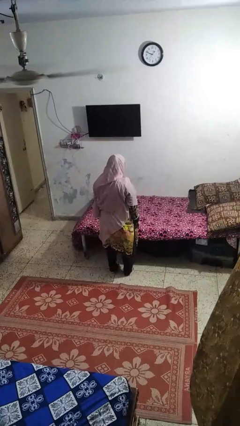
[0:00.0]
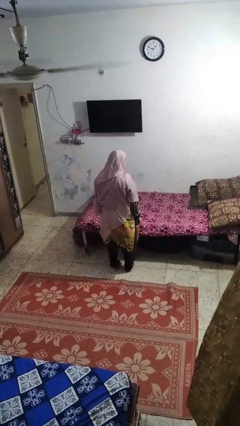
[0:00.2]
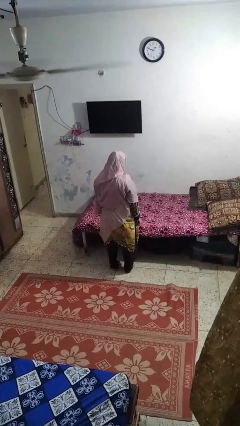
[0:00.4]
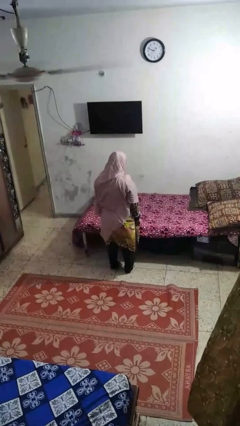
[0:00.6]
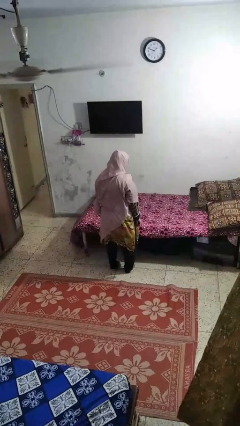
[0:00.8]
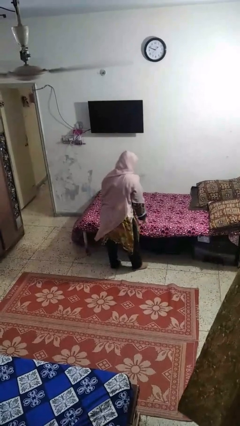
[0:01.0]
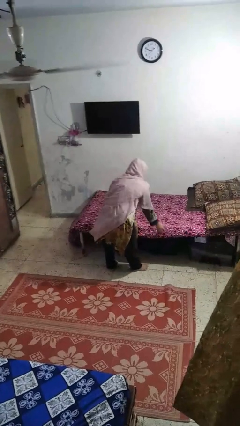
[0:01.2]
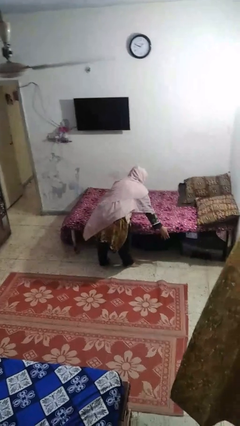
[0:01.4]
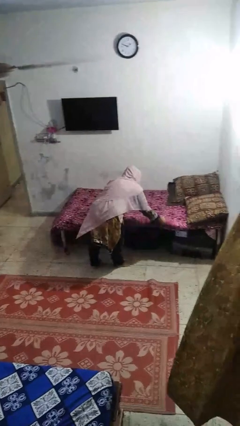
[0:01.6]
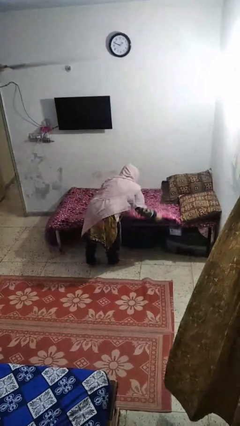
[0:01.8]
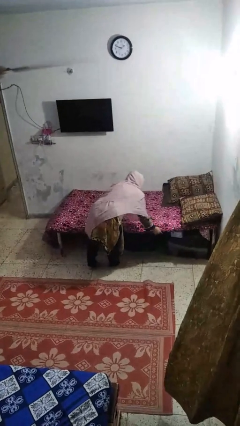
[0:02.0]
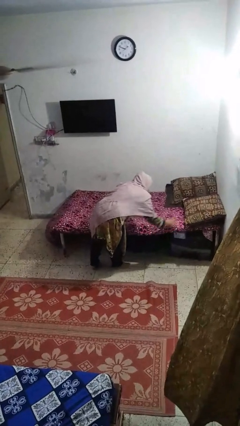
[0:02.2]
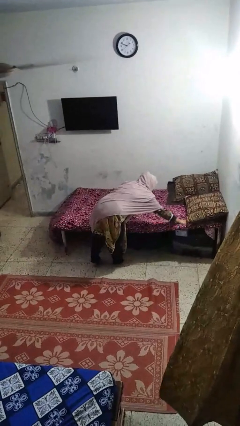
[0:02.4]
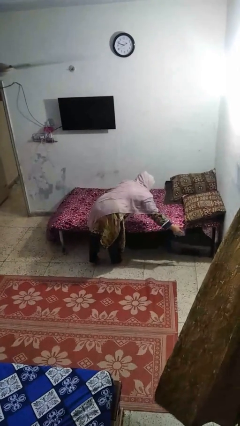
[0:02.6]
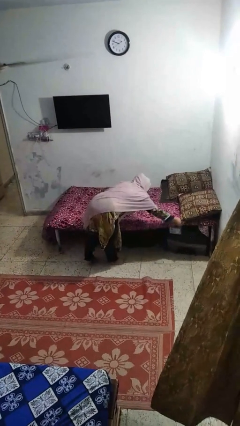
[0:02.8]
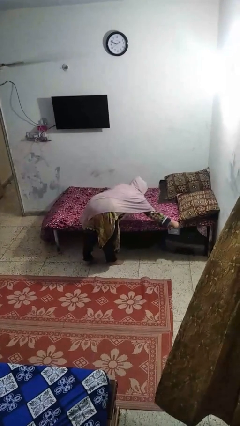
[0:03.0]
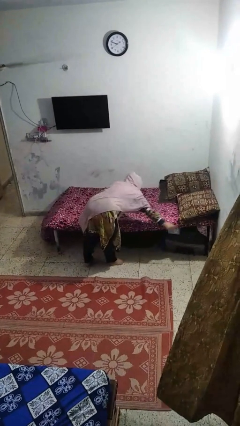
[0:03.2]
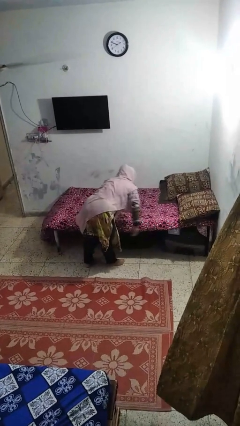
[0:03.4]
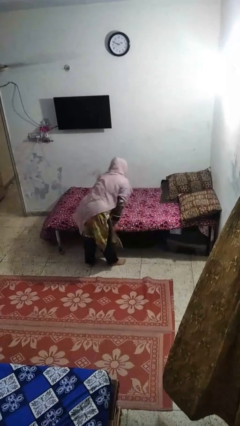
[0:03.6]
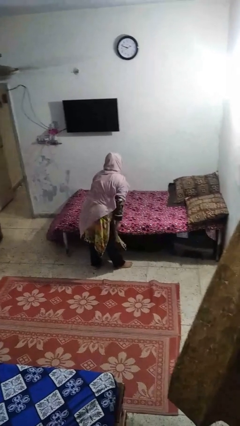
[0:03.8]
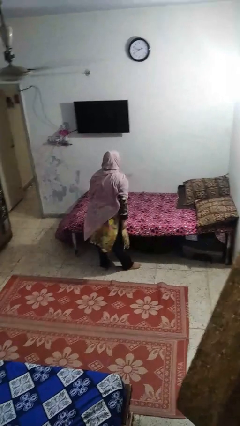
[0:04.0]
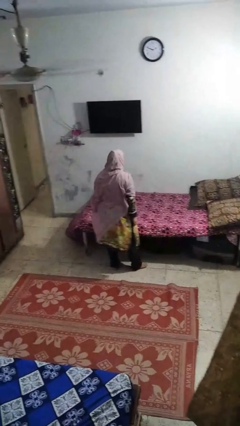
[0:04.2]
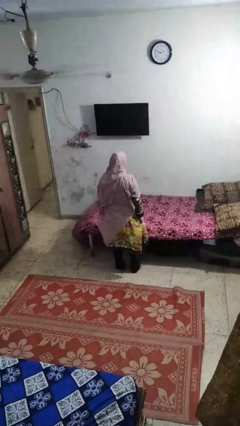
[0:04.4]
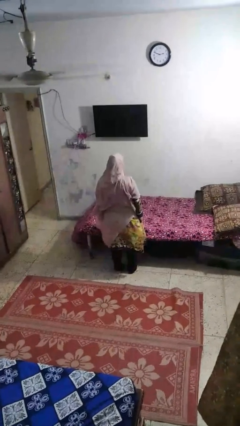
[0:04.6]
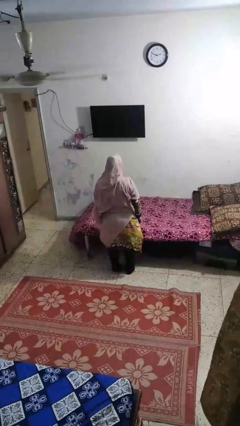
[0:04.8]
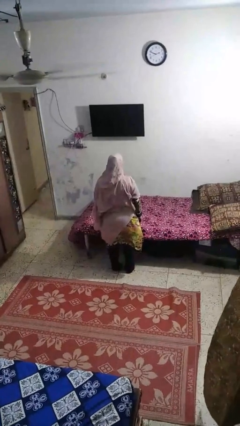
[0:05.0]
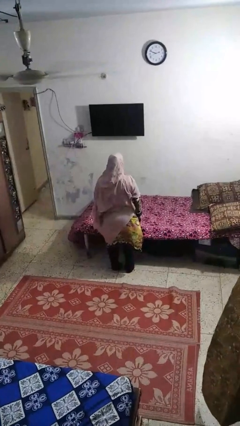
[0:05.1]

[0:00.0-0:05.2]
person makes bed

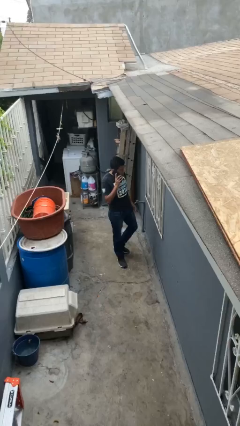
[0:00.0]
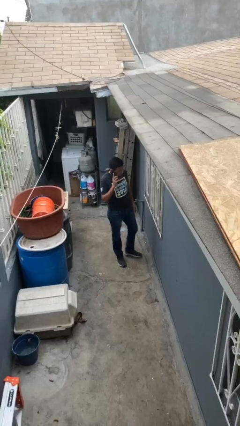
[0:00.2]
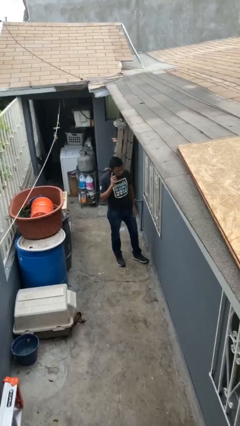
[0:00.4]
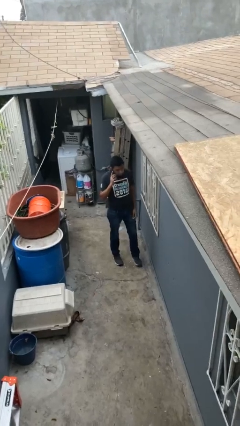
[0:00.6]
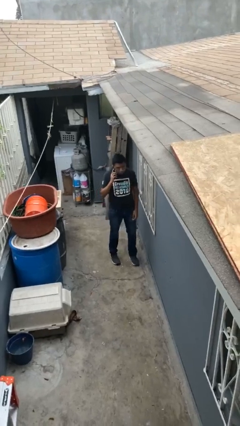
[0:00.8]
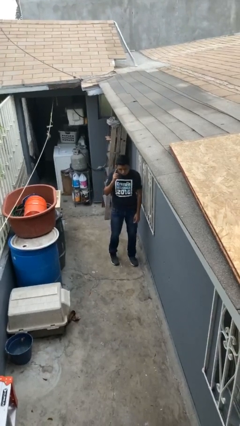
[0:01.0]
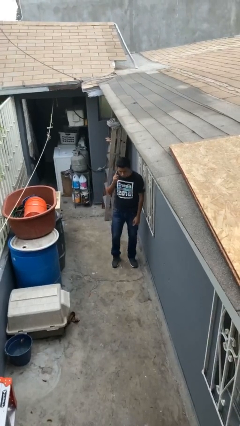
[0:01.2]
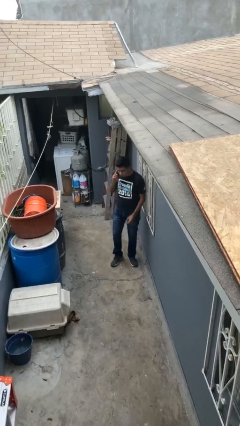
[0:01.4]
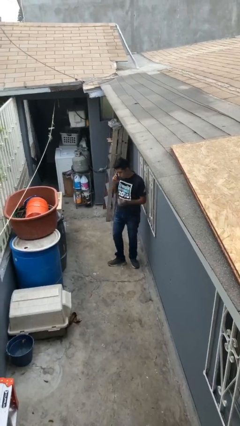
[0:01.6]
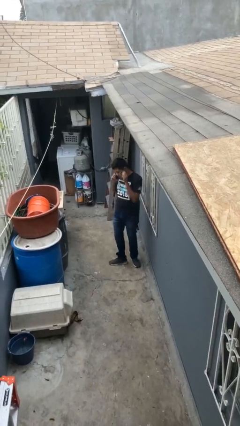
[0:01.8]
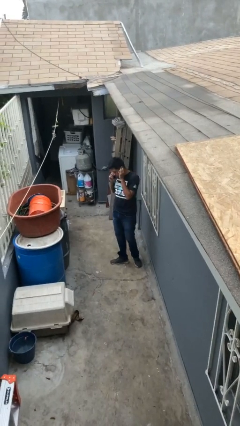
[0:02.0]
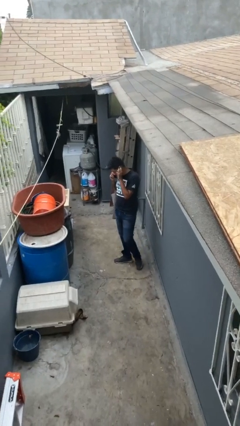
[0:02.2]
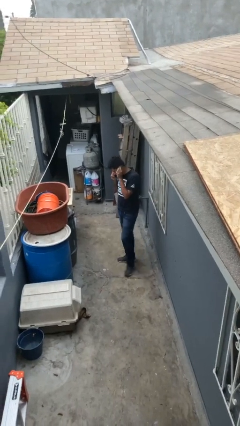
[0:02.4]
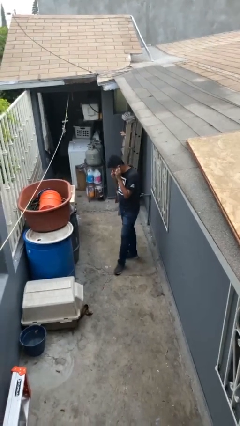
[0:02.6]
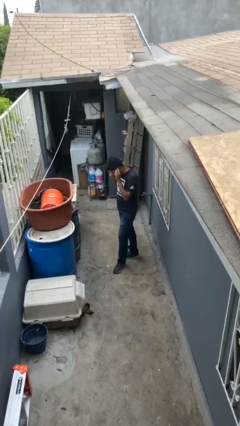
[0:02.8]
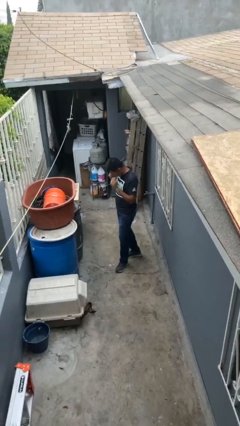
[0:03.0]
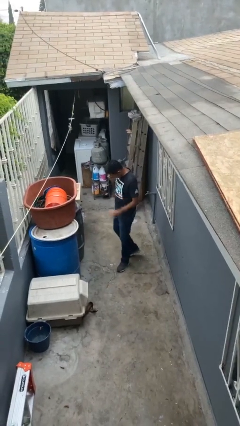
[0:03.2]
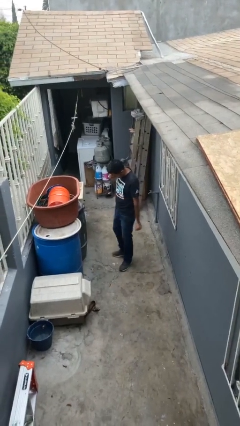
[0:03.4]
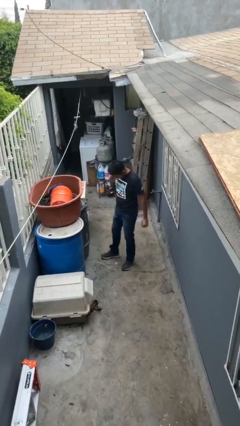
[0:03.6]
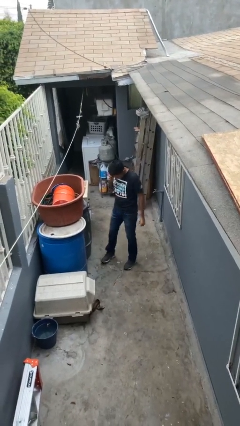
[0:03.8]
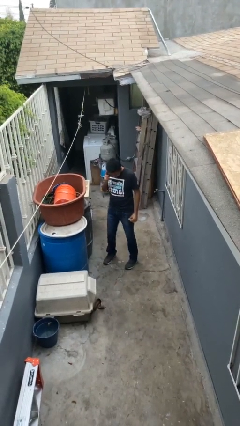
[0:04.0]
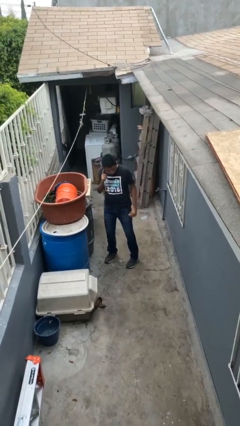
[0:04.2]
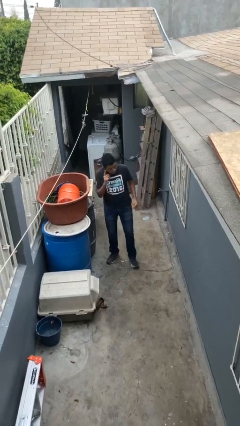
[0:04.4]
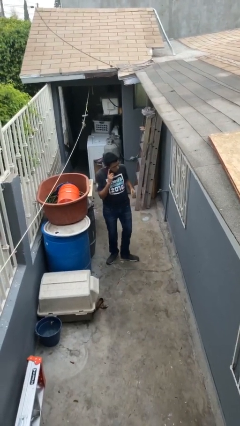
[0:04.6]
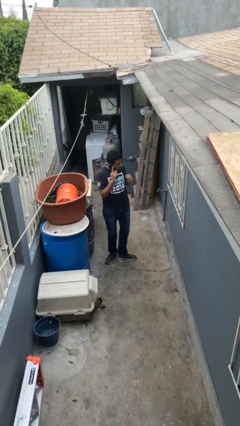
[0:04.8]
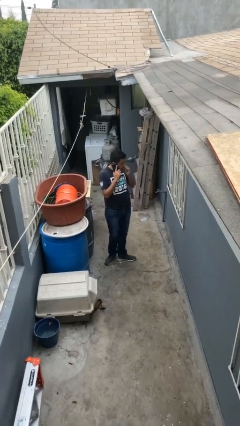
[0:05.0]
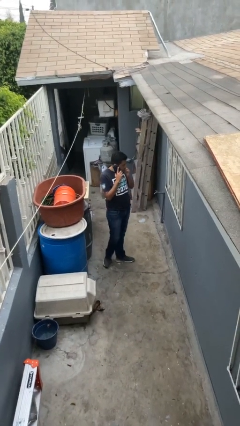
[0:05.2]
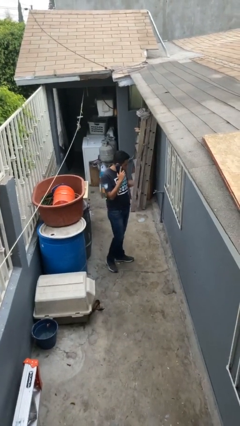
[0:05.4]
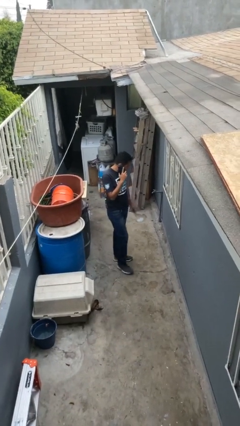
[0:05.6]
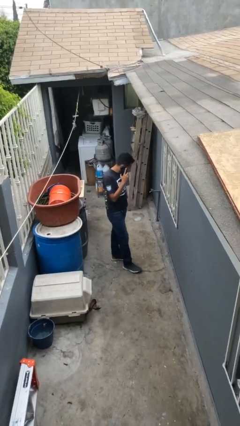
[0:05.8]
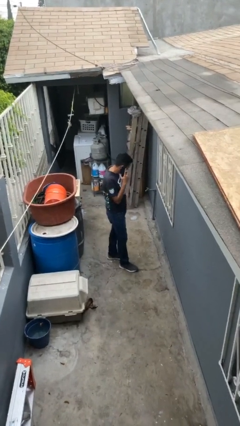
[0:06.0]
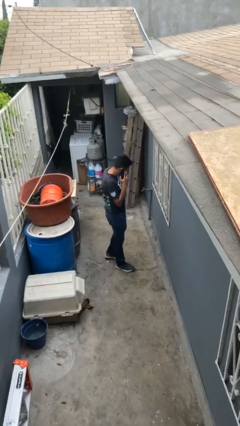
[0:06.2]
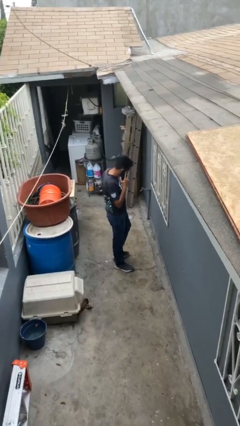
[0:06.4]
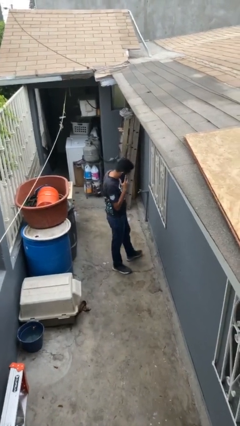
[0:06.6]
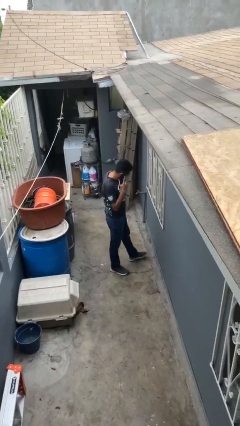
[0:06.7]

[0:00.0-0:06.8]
person talks on phone

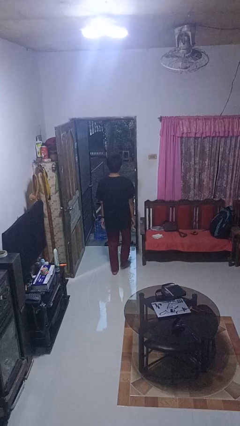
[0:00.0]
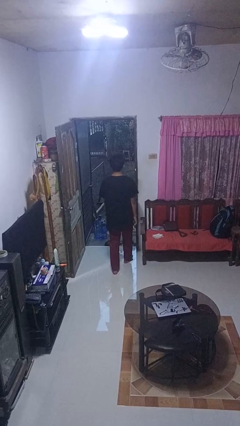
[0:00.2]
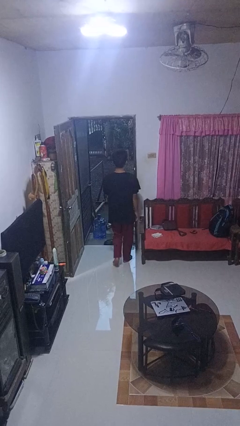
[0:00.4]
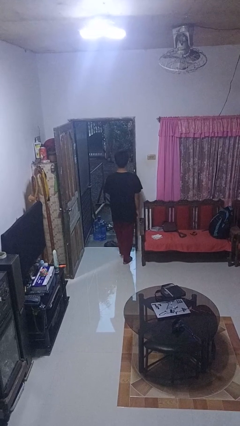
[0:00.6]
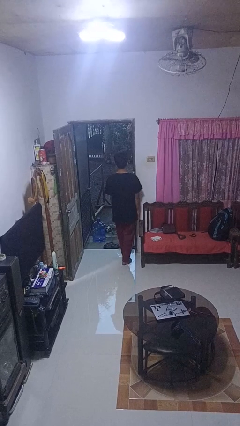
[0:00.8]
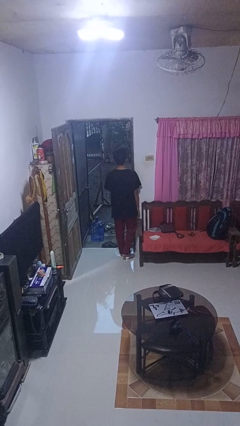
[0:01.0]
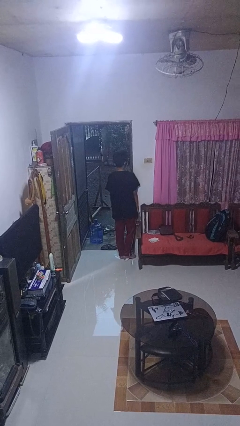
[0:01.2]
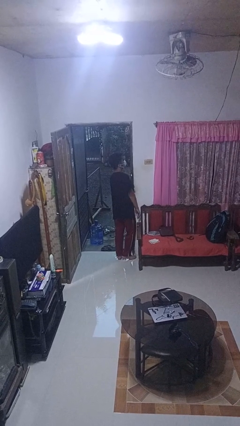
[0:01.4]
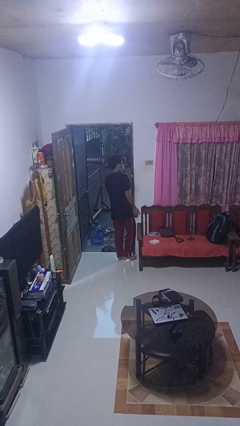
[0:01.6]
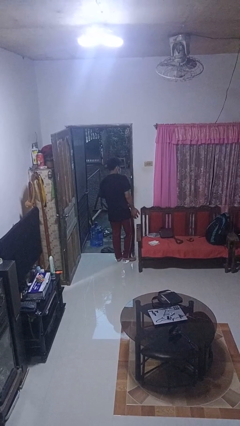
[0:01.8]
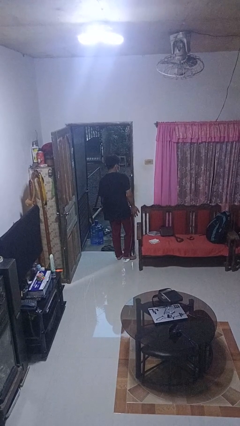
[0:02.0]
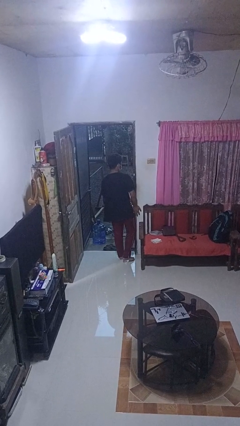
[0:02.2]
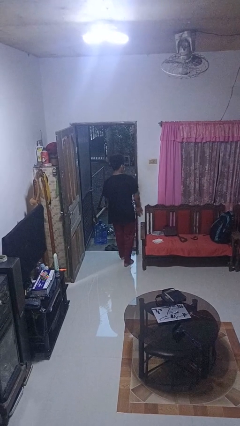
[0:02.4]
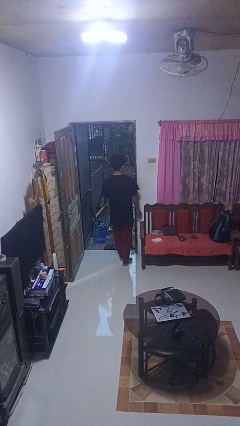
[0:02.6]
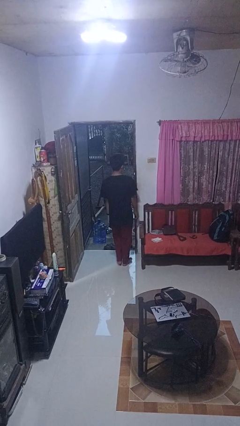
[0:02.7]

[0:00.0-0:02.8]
person bumps into wall

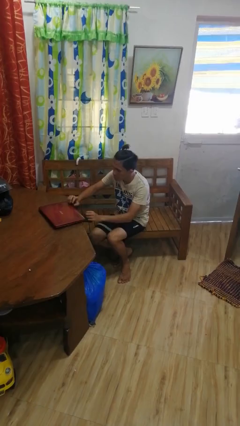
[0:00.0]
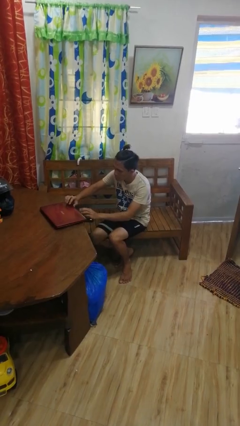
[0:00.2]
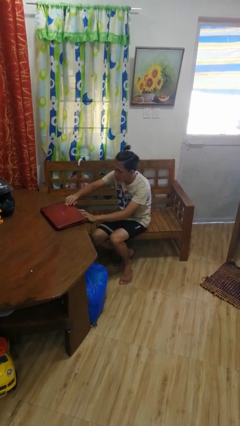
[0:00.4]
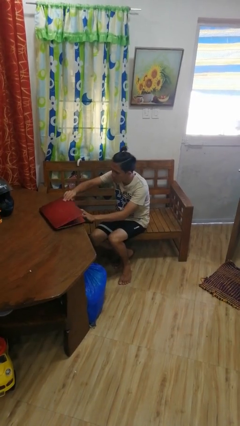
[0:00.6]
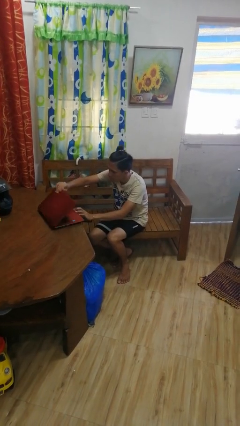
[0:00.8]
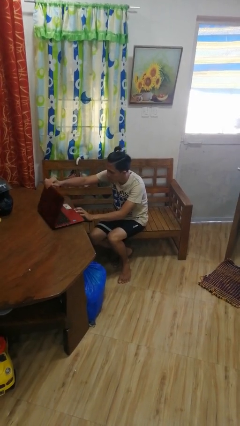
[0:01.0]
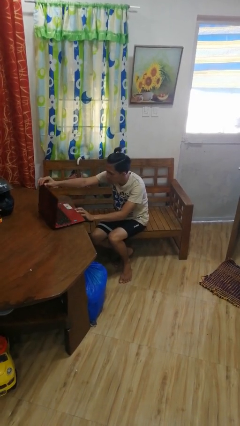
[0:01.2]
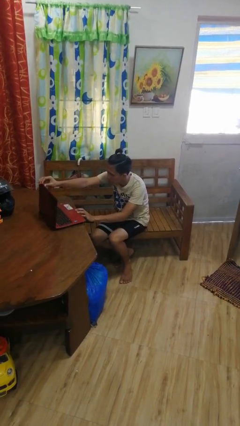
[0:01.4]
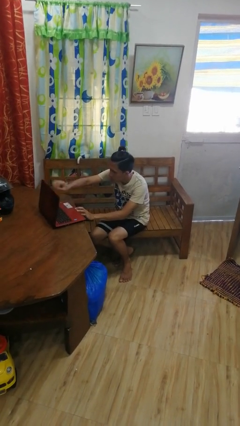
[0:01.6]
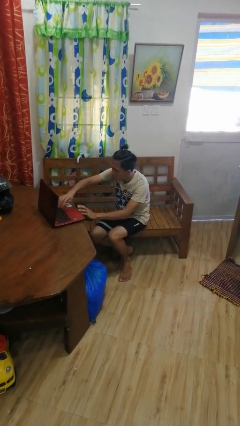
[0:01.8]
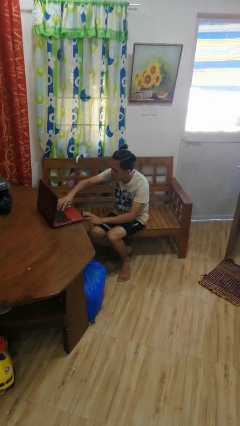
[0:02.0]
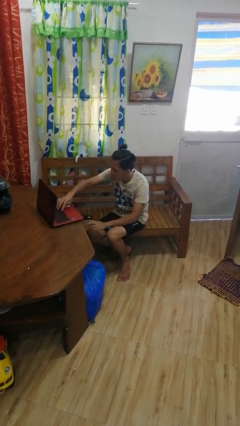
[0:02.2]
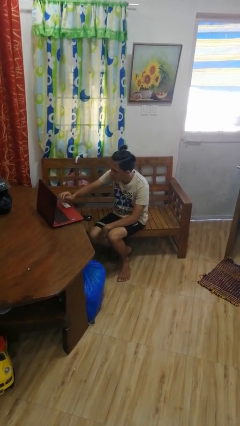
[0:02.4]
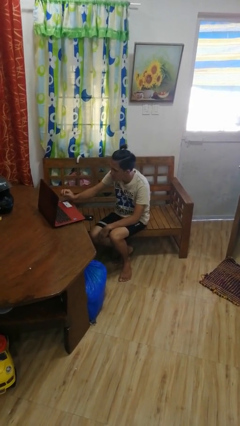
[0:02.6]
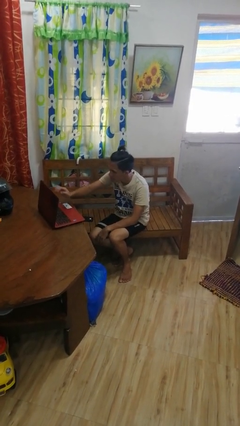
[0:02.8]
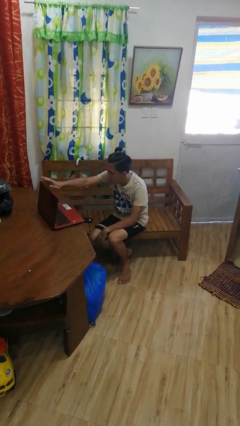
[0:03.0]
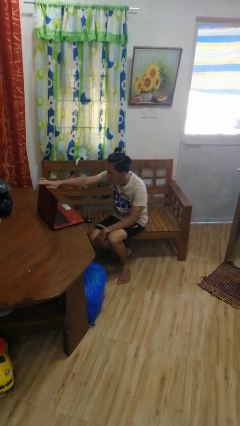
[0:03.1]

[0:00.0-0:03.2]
person opens laptop
